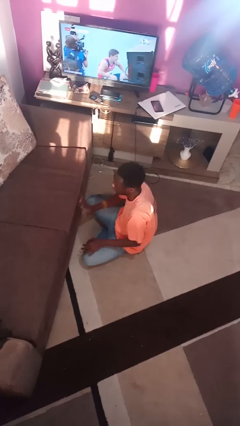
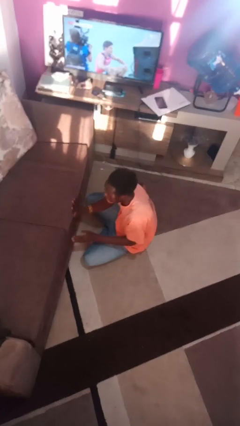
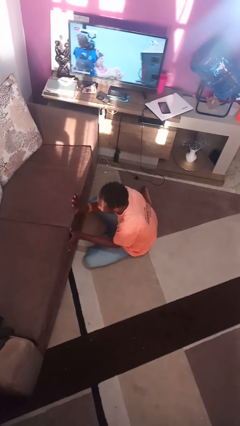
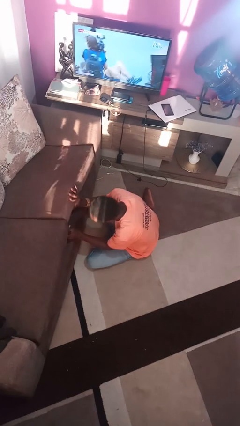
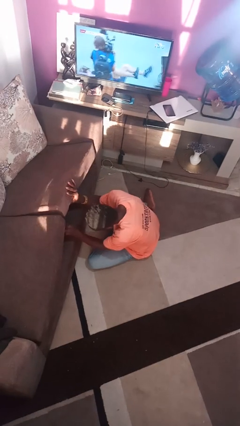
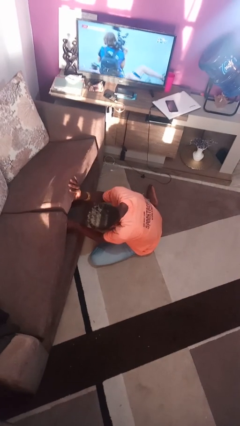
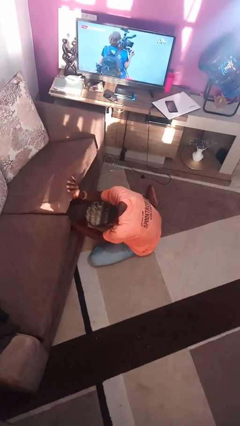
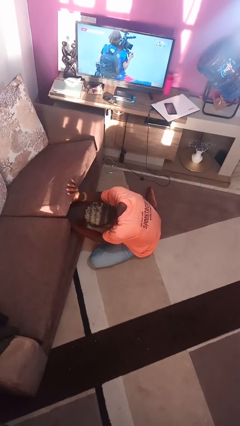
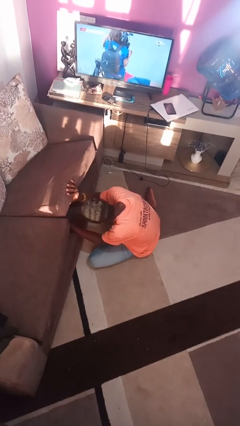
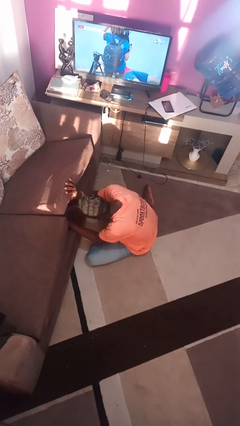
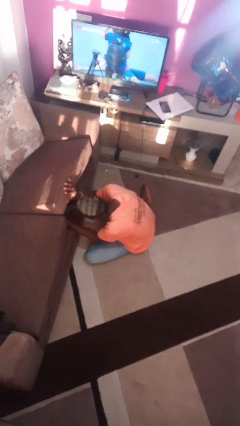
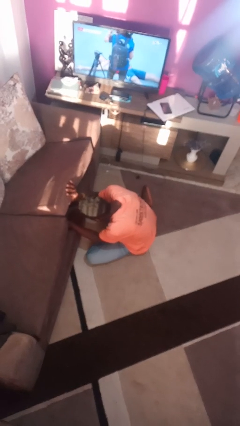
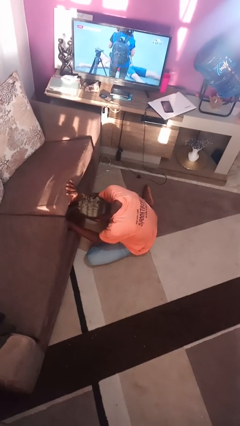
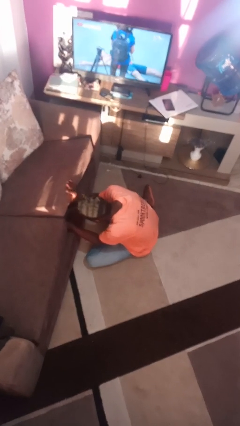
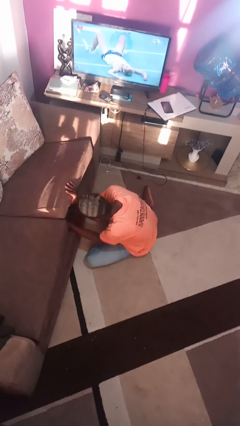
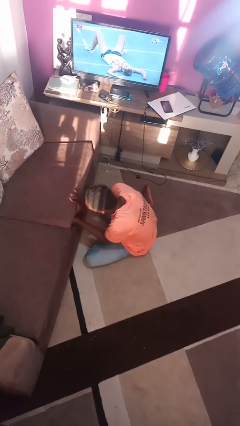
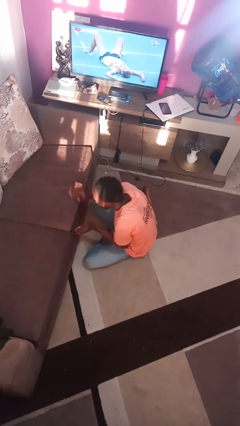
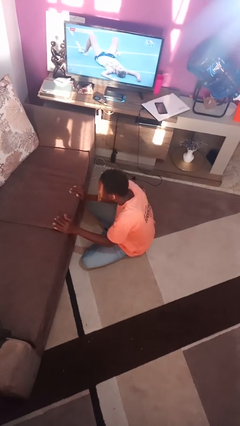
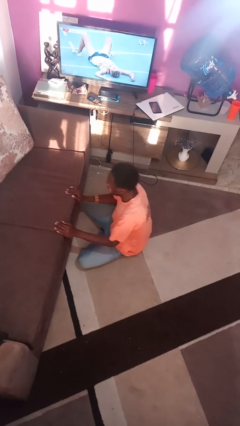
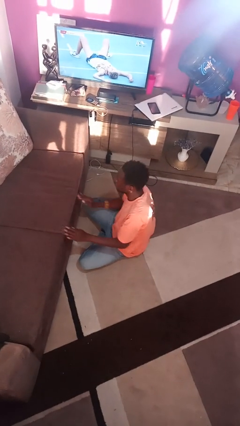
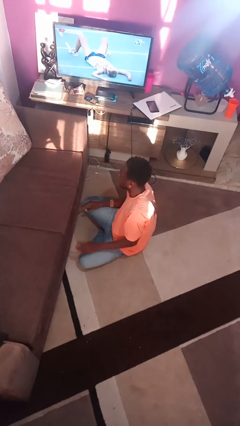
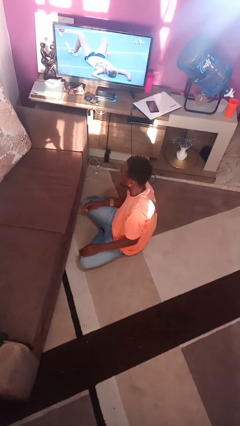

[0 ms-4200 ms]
person searches under couch

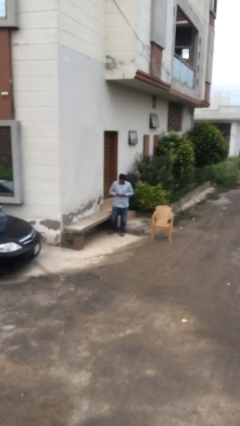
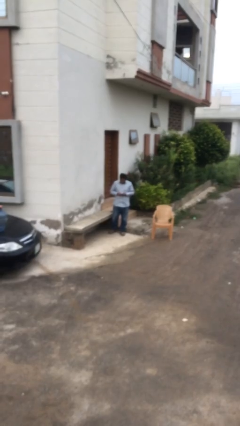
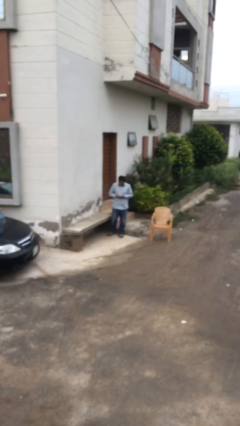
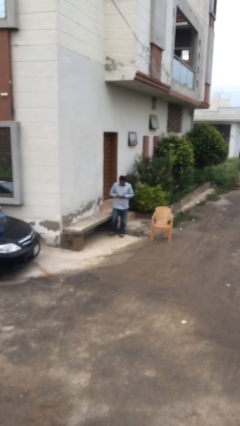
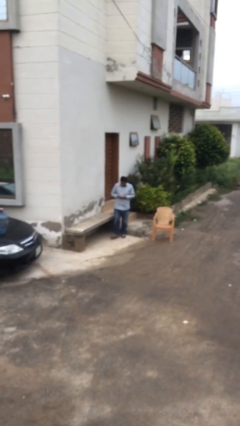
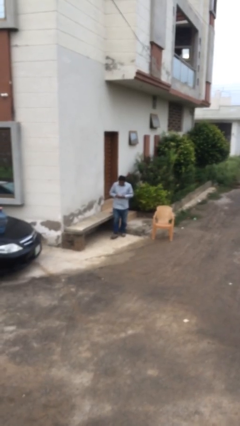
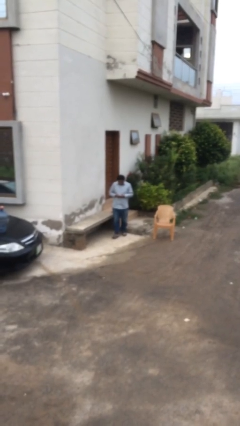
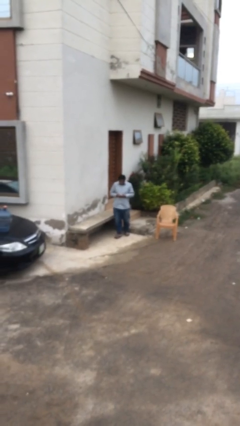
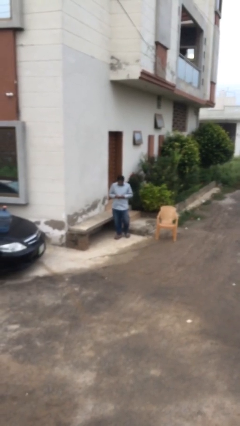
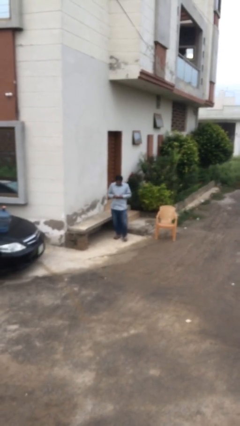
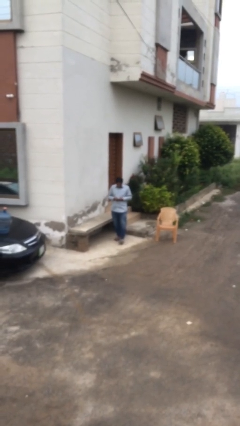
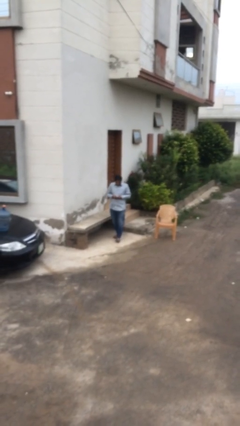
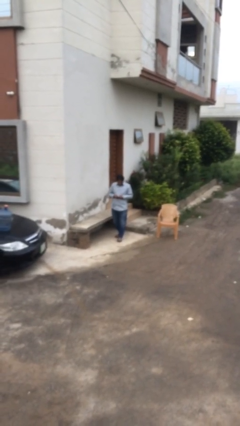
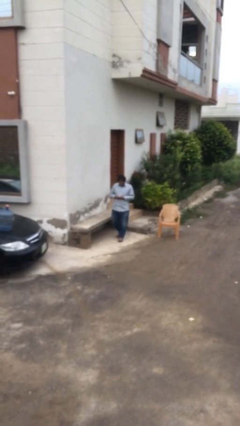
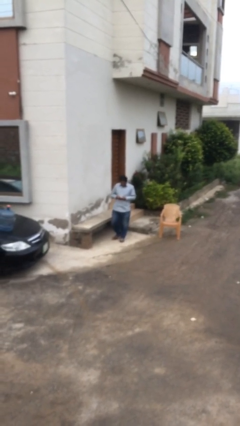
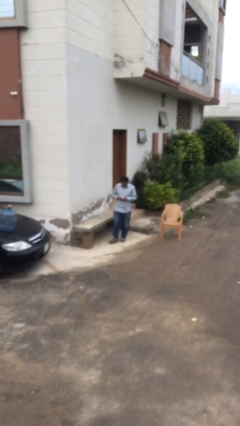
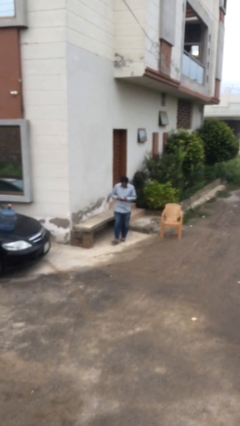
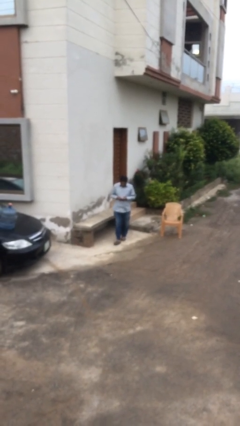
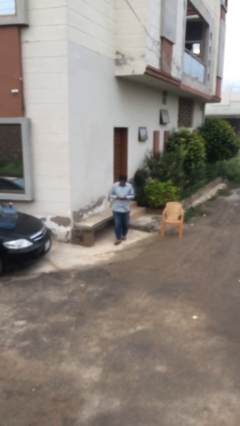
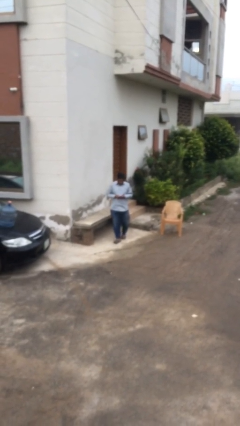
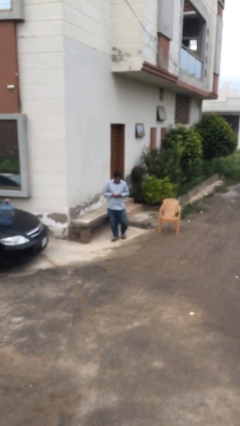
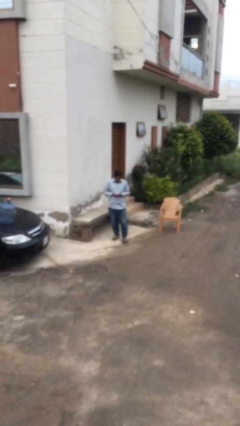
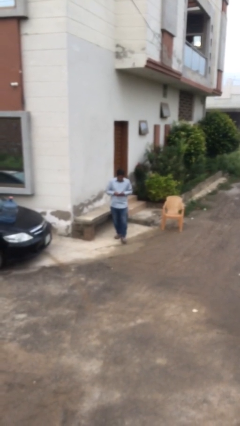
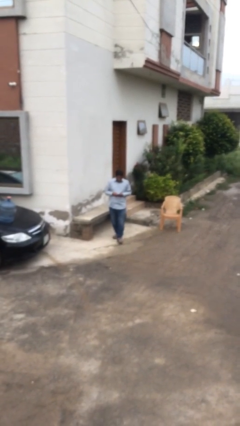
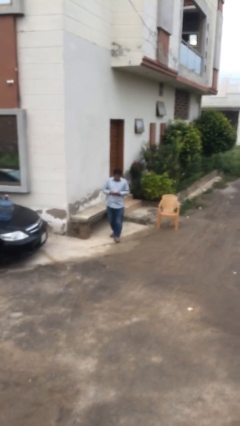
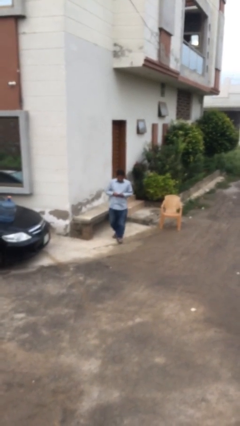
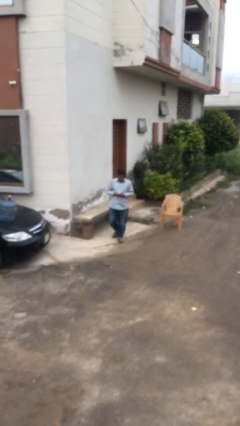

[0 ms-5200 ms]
person texts on phone

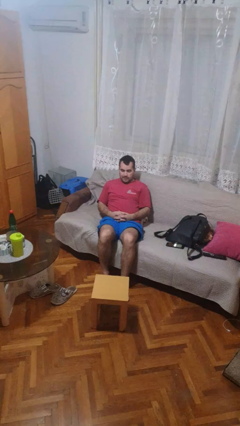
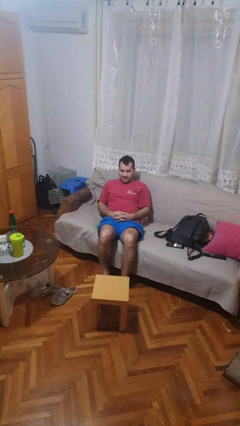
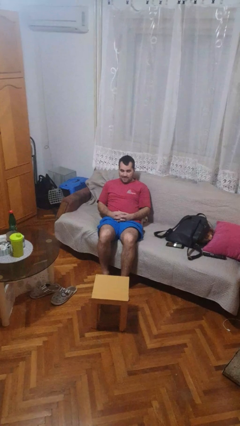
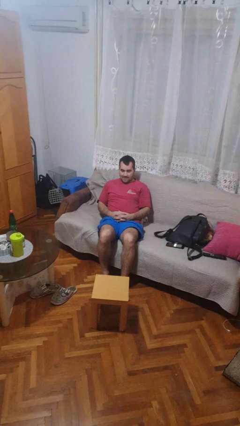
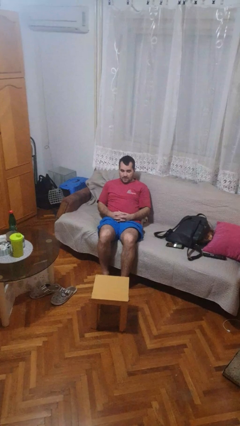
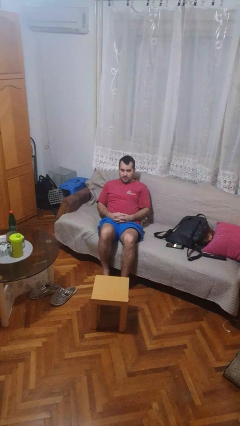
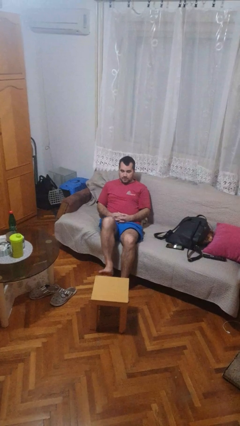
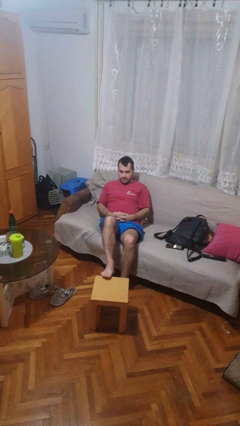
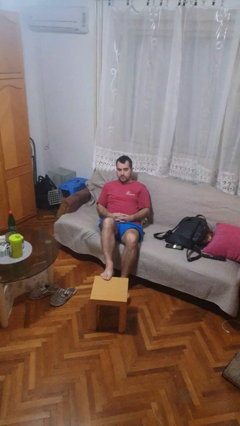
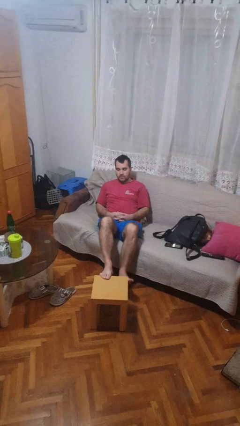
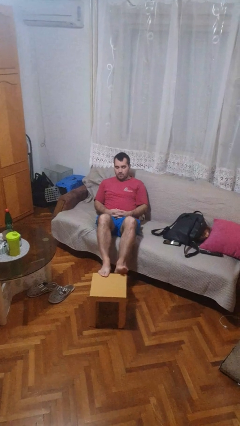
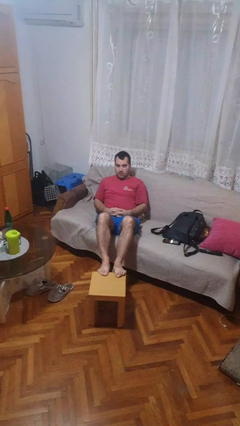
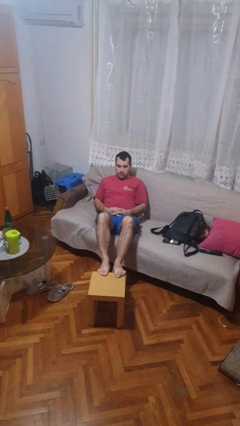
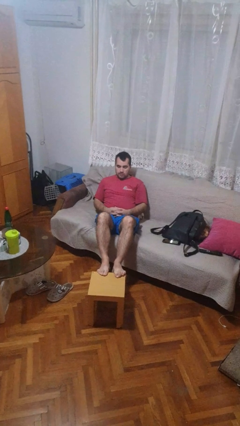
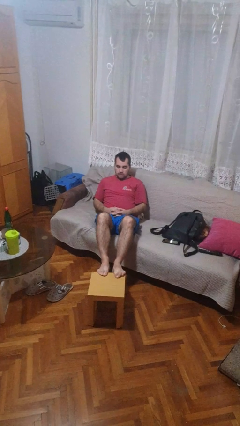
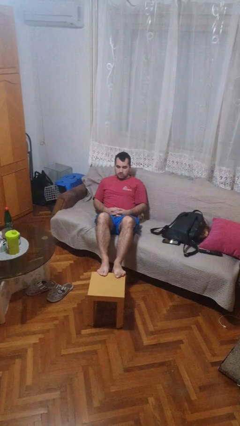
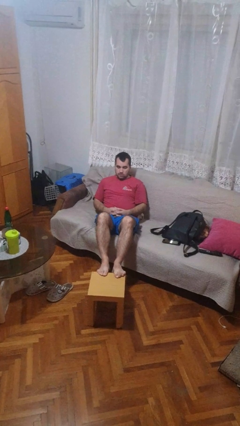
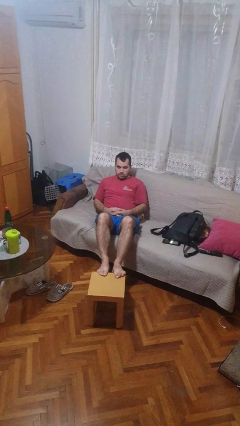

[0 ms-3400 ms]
person puts feet up

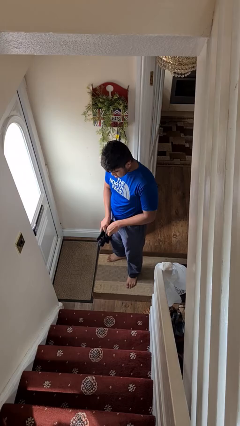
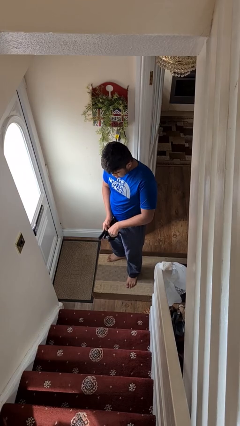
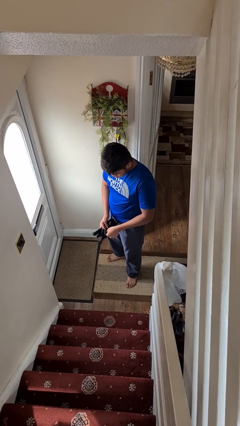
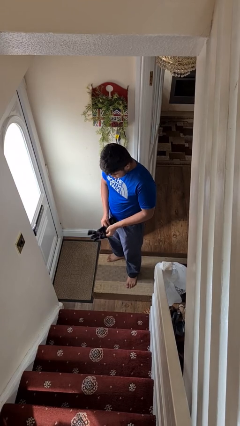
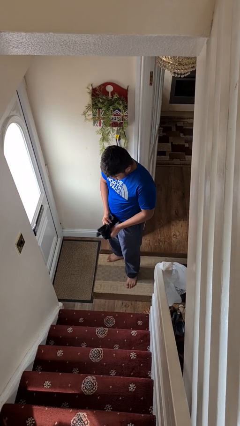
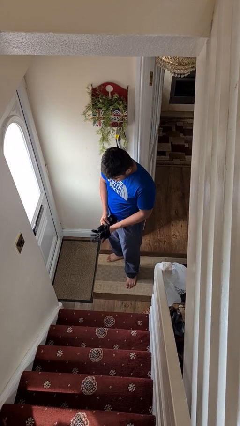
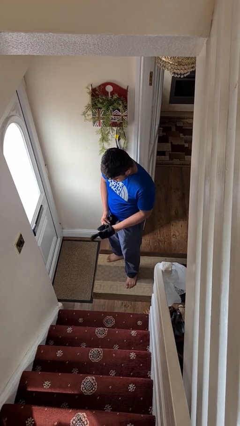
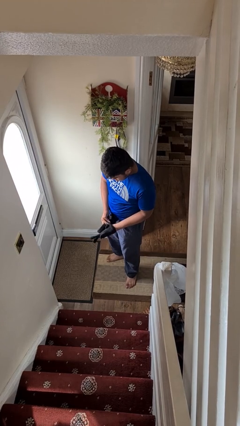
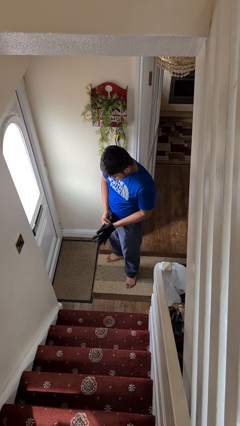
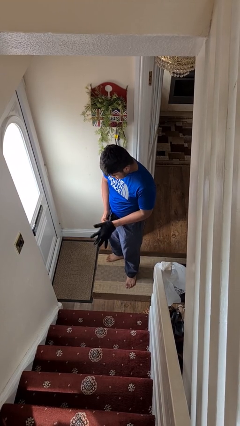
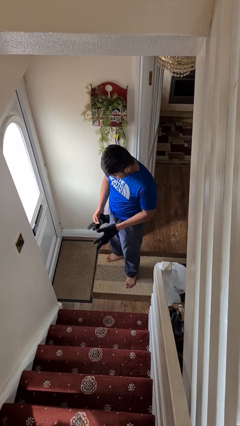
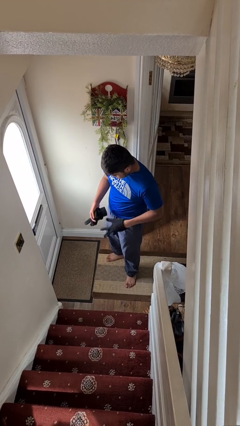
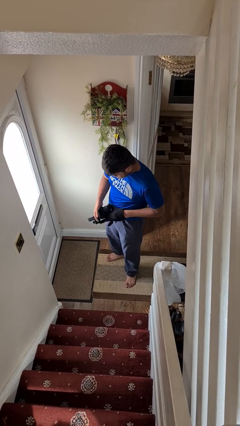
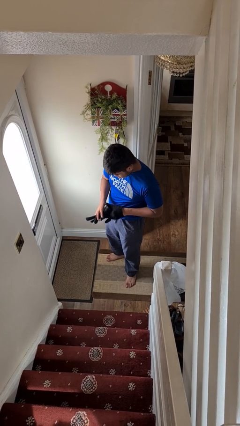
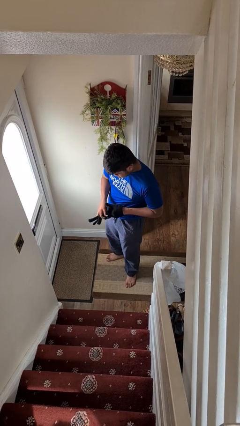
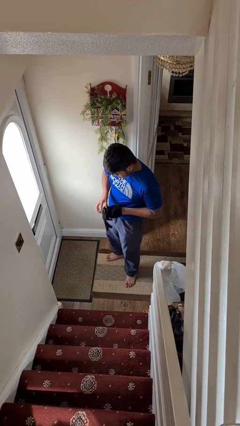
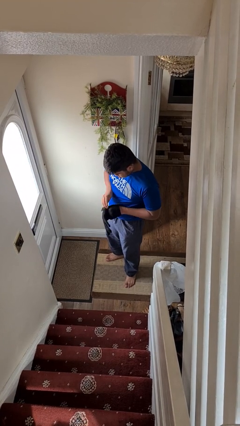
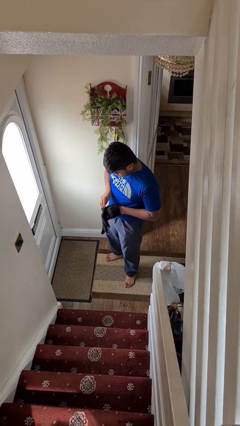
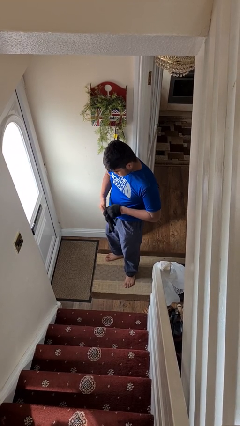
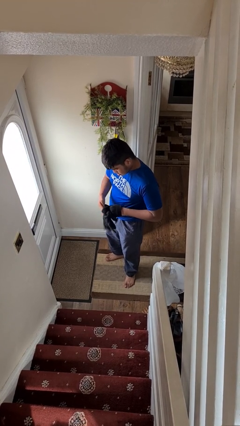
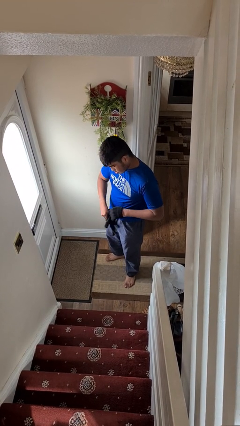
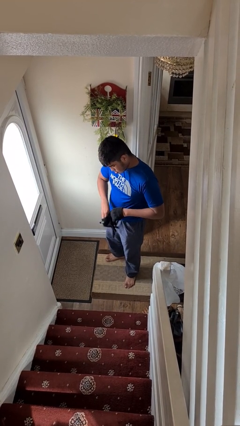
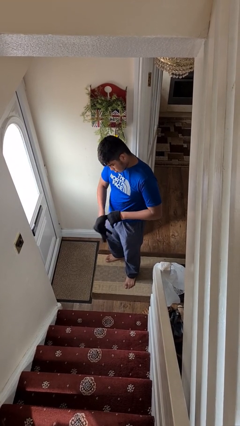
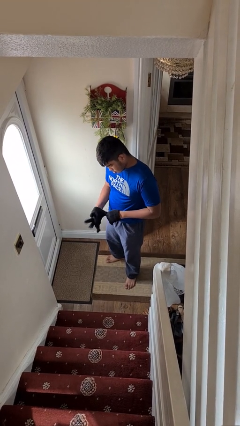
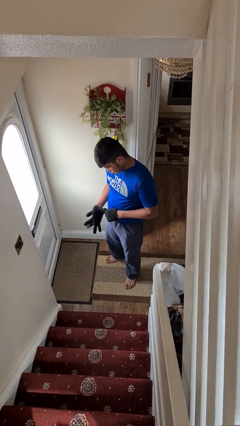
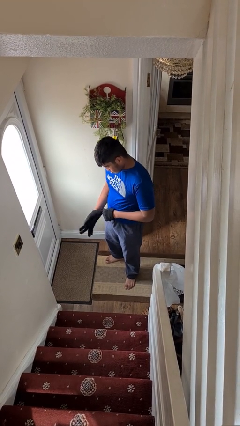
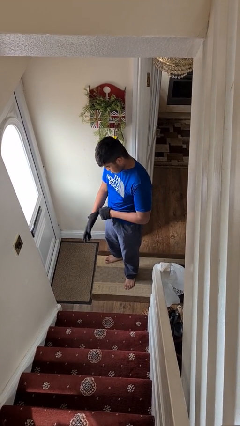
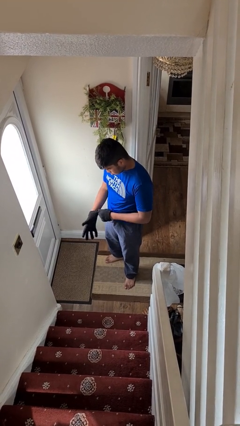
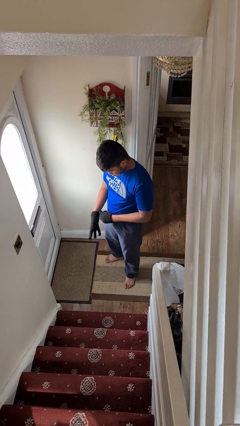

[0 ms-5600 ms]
person puts on gloves
